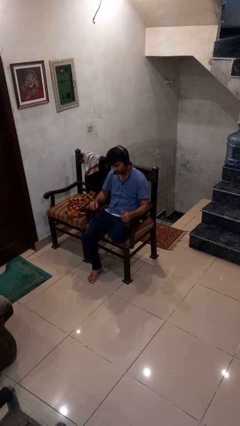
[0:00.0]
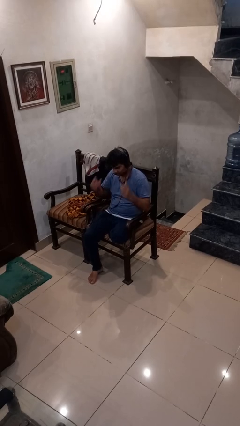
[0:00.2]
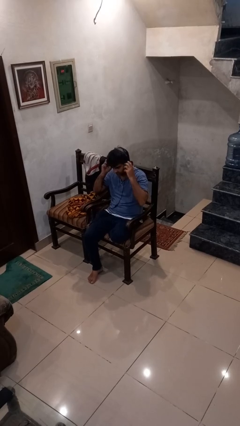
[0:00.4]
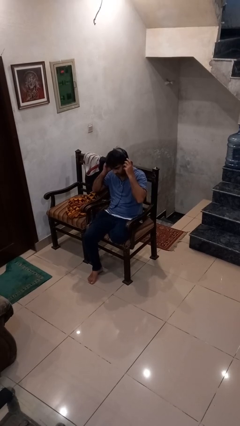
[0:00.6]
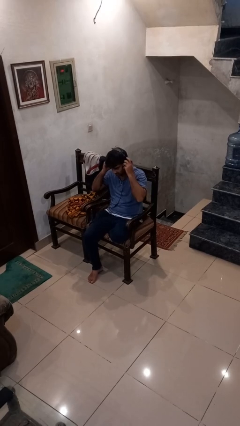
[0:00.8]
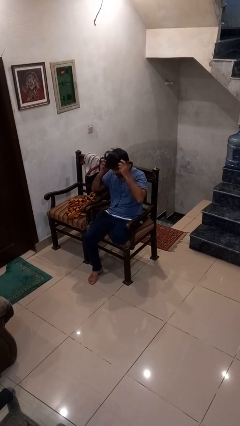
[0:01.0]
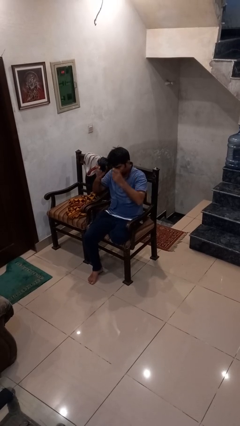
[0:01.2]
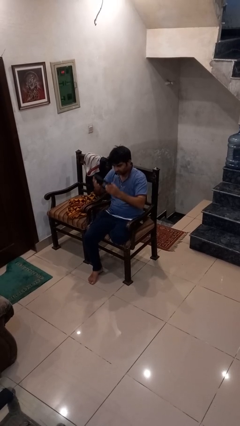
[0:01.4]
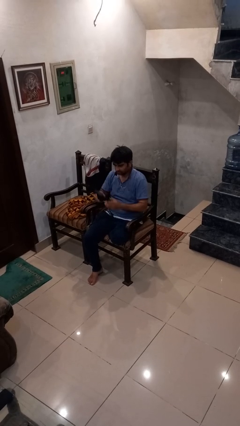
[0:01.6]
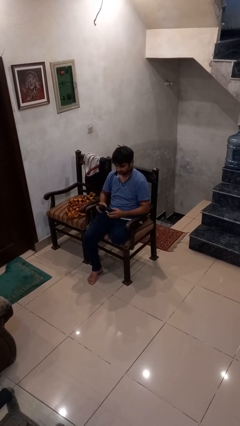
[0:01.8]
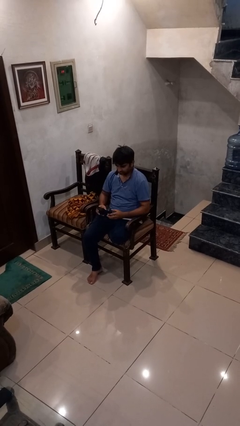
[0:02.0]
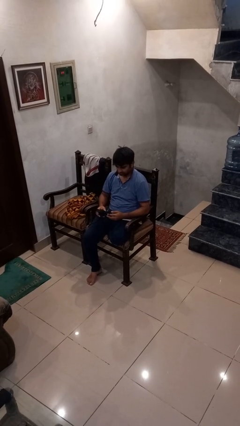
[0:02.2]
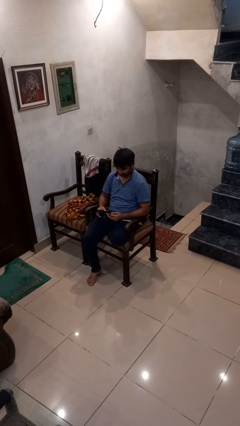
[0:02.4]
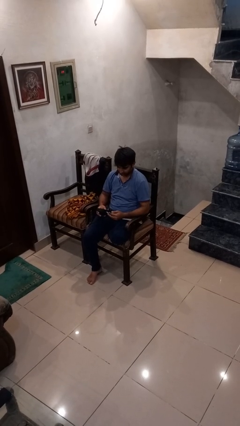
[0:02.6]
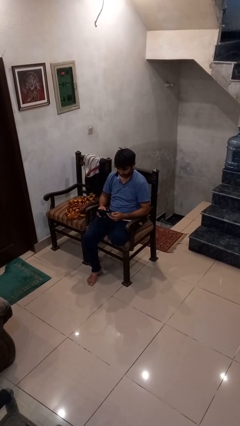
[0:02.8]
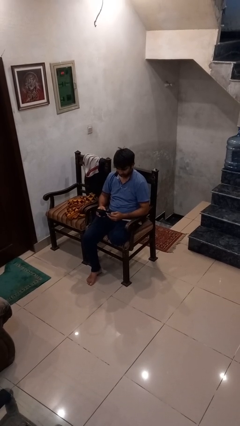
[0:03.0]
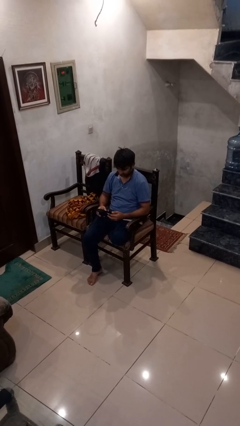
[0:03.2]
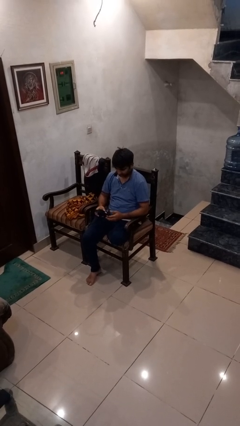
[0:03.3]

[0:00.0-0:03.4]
person takes off headphones

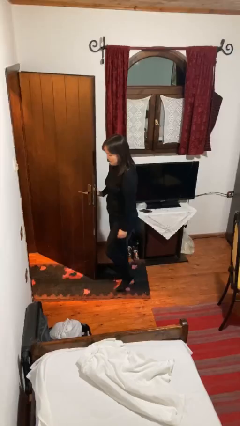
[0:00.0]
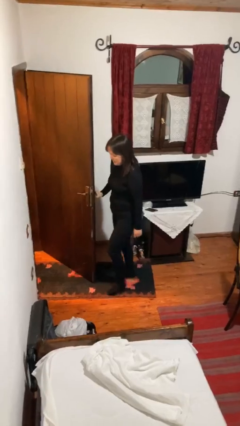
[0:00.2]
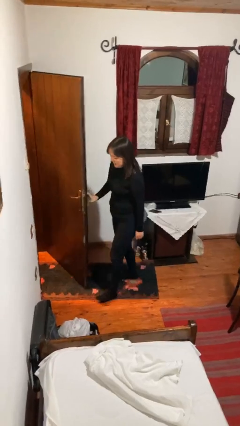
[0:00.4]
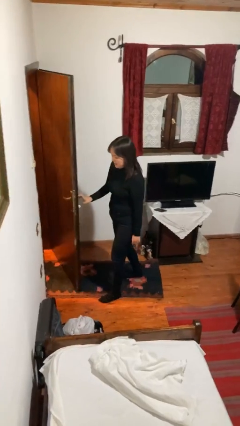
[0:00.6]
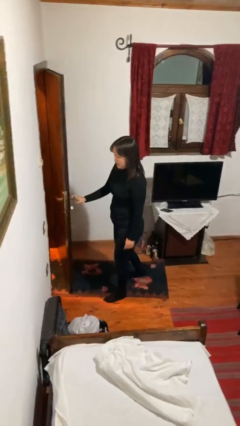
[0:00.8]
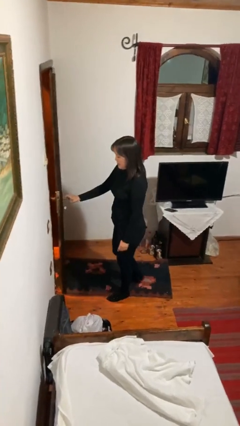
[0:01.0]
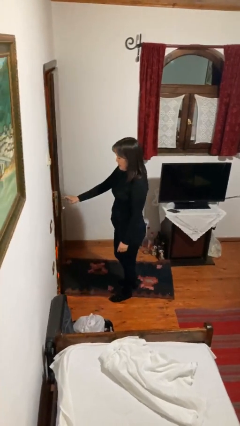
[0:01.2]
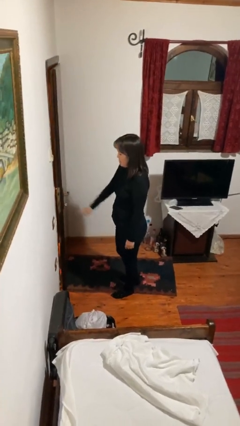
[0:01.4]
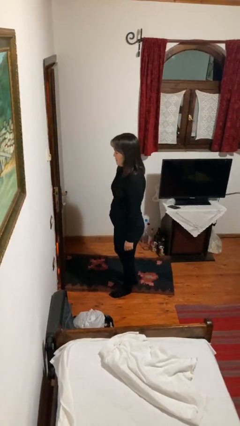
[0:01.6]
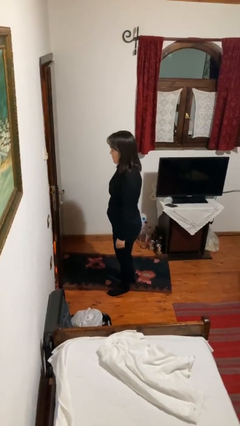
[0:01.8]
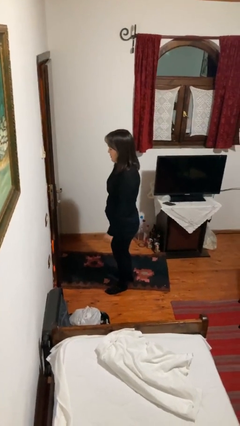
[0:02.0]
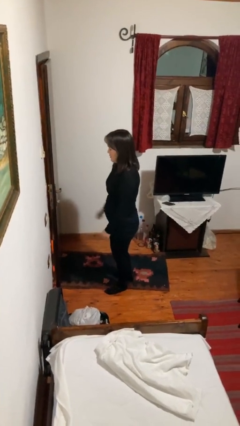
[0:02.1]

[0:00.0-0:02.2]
person closes facility door

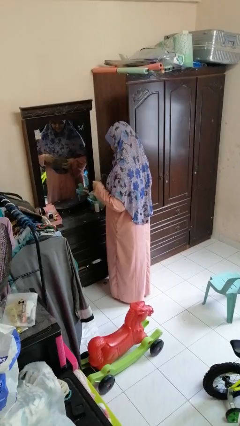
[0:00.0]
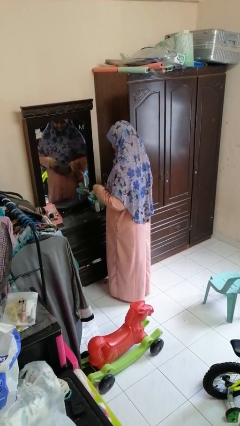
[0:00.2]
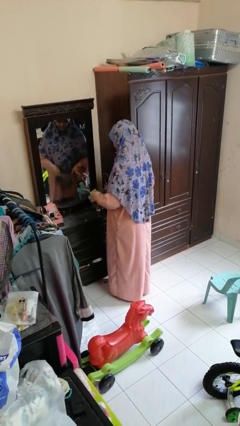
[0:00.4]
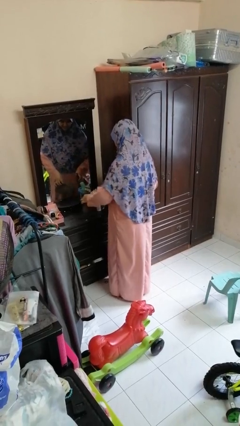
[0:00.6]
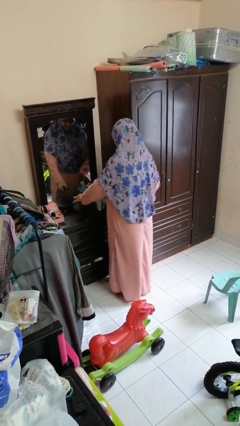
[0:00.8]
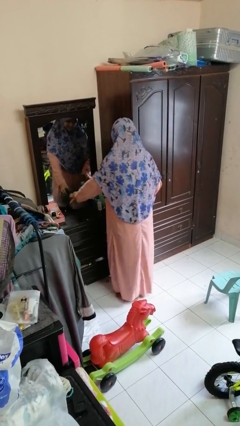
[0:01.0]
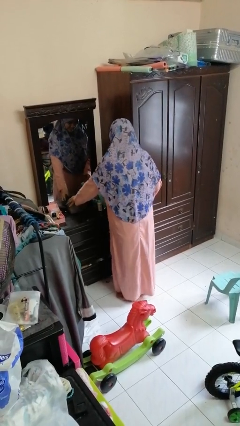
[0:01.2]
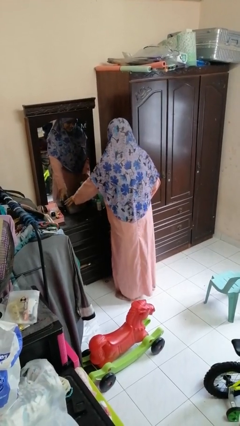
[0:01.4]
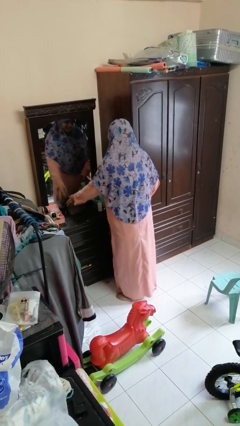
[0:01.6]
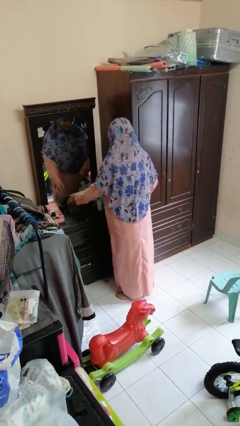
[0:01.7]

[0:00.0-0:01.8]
person puts down object on countertop

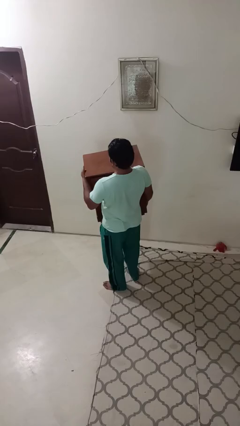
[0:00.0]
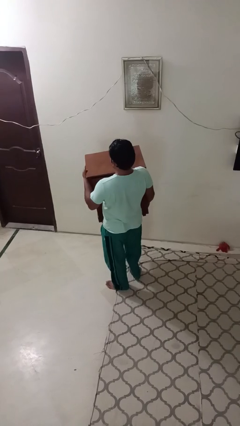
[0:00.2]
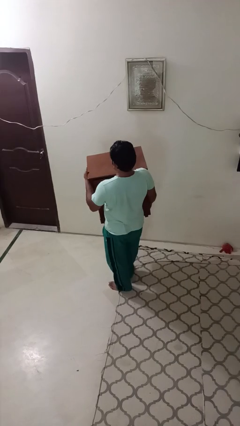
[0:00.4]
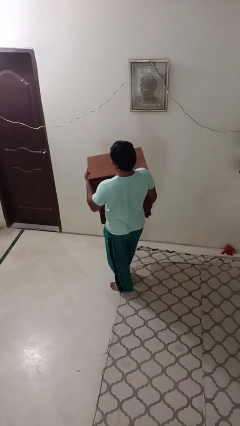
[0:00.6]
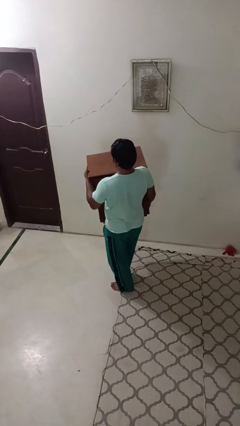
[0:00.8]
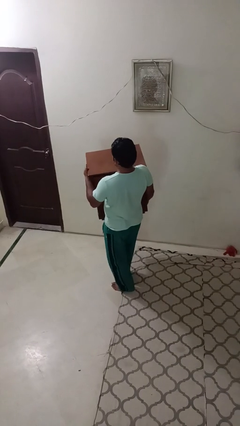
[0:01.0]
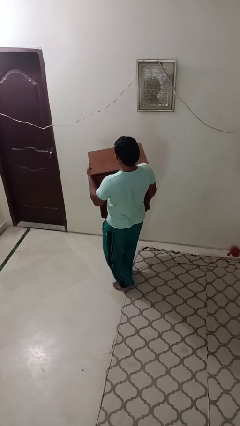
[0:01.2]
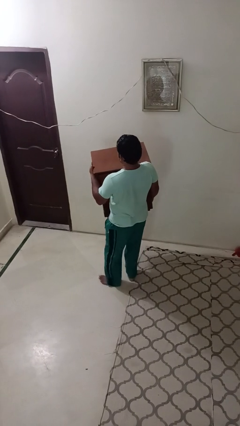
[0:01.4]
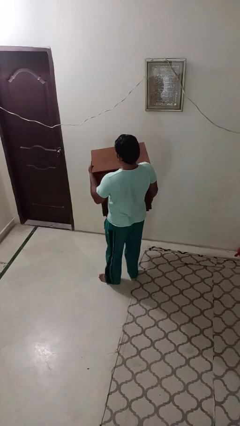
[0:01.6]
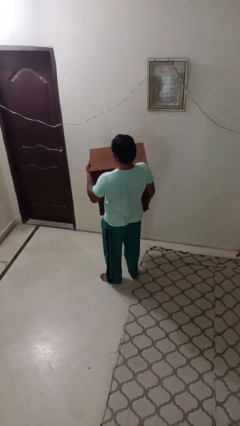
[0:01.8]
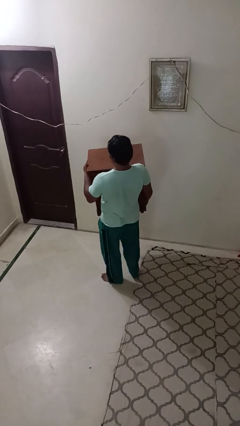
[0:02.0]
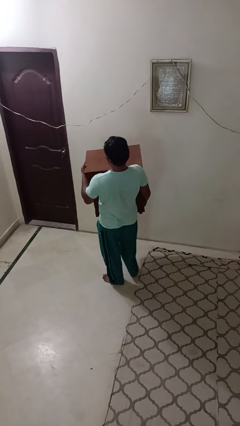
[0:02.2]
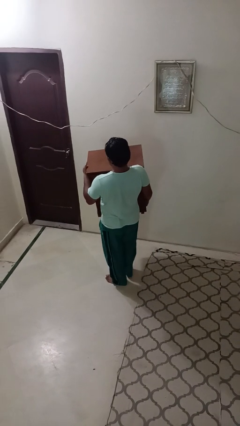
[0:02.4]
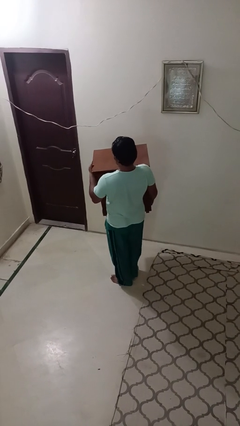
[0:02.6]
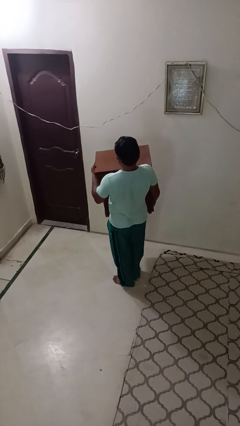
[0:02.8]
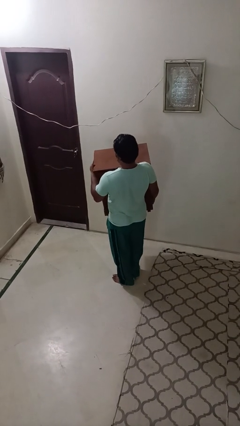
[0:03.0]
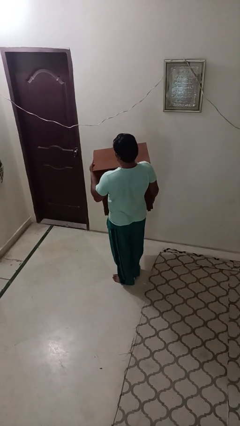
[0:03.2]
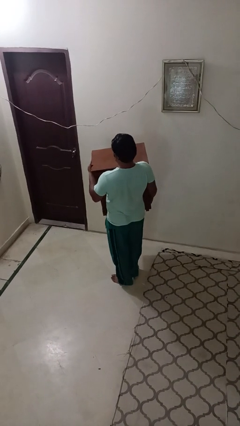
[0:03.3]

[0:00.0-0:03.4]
person carries furniture

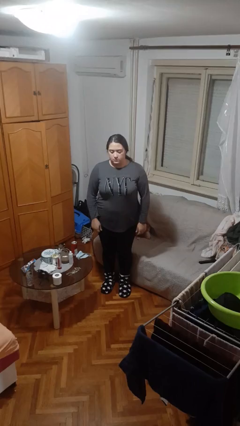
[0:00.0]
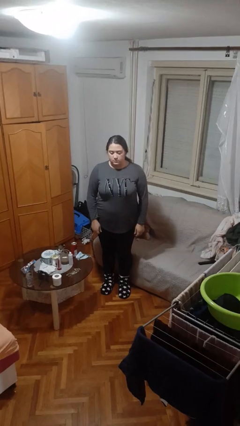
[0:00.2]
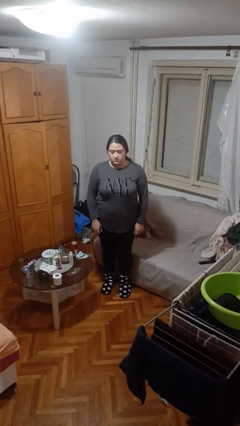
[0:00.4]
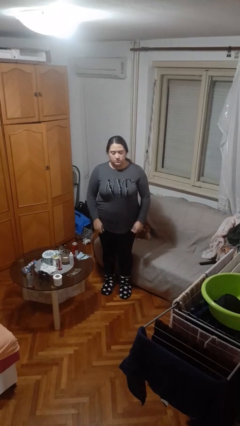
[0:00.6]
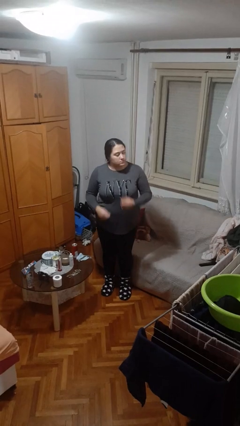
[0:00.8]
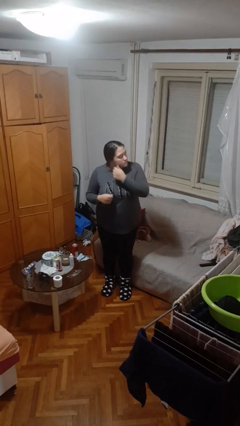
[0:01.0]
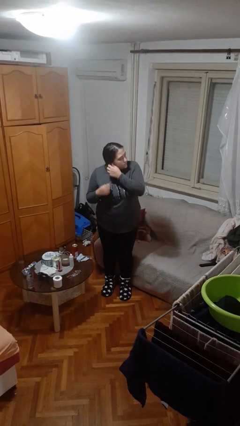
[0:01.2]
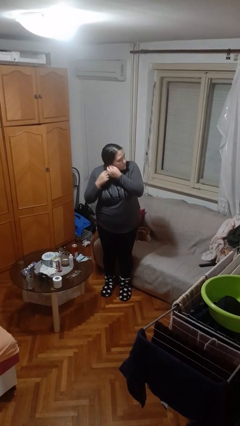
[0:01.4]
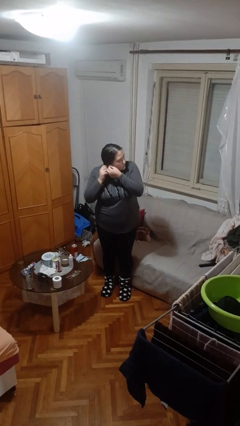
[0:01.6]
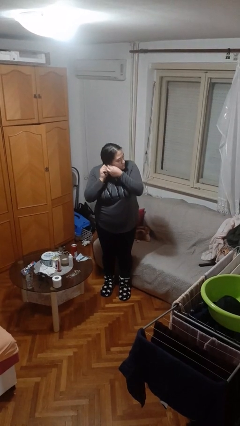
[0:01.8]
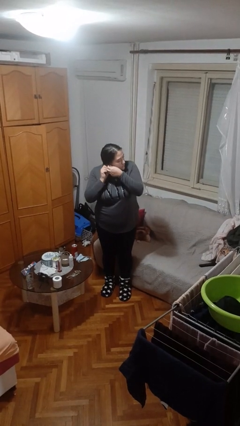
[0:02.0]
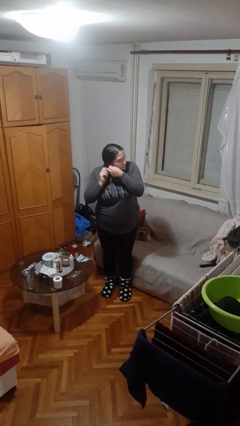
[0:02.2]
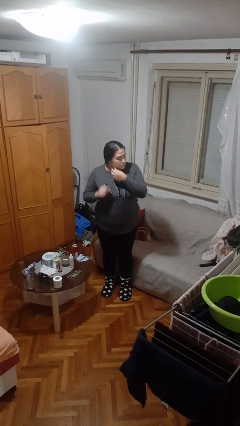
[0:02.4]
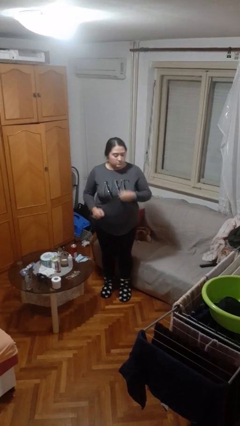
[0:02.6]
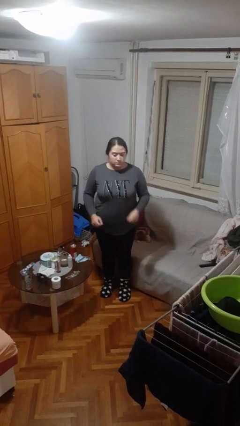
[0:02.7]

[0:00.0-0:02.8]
person puts on earrings

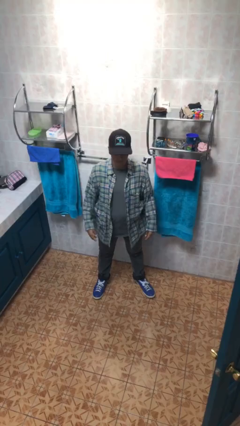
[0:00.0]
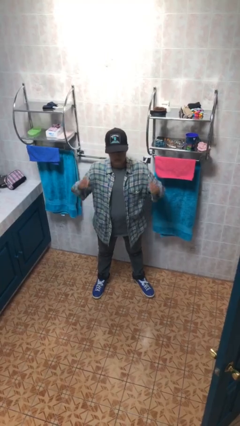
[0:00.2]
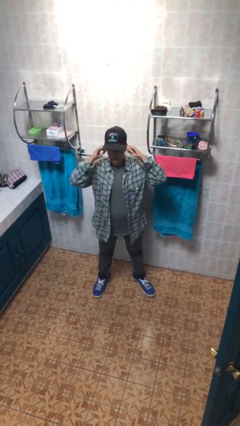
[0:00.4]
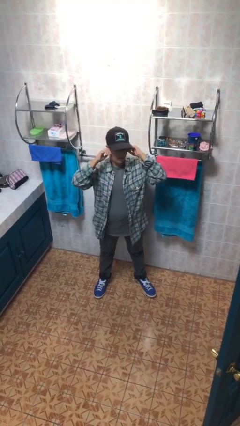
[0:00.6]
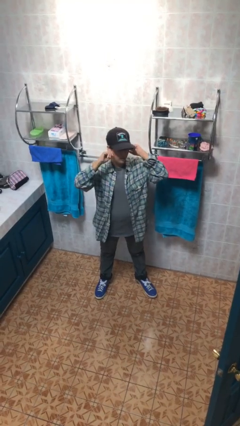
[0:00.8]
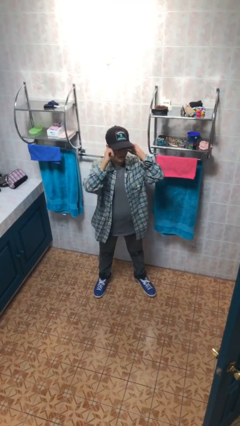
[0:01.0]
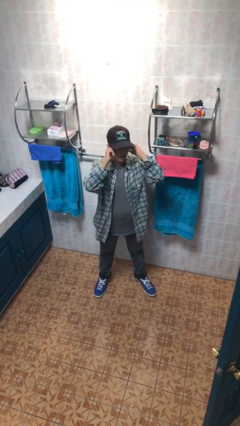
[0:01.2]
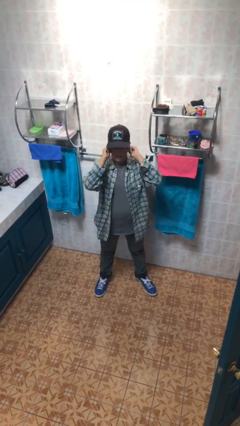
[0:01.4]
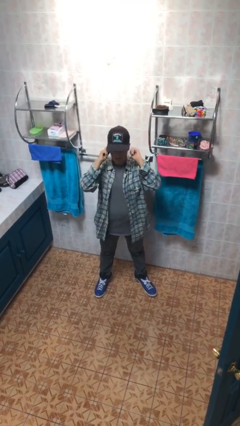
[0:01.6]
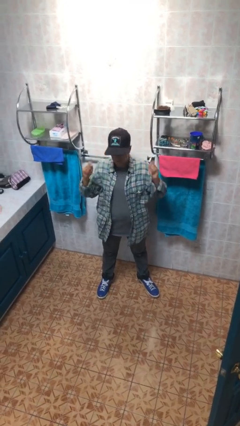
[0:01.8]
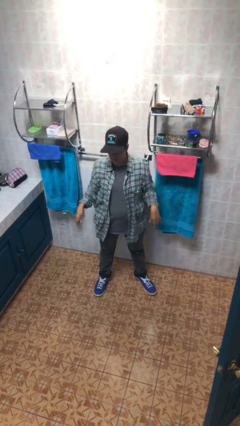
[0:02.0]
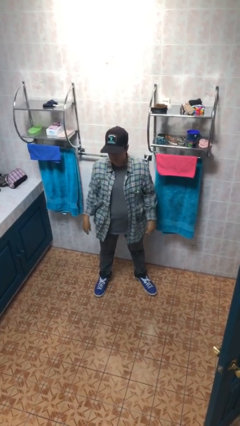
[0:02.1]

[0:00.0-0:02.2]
person puts fingers in ear

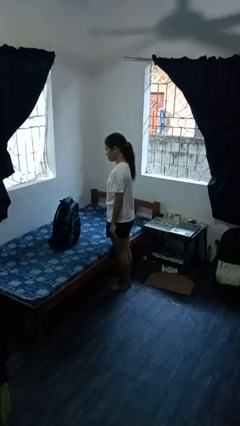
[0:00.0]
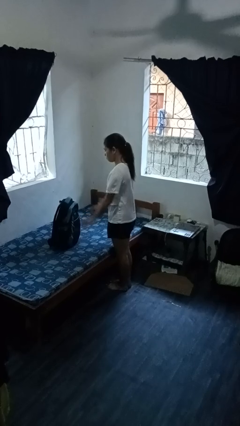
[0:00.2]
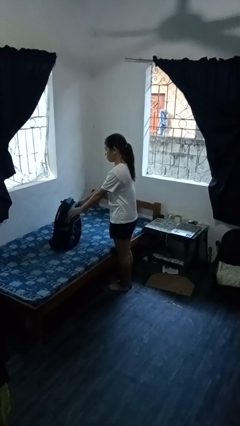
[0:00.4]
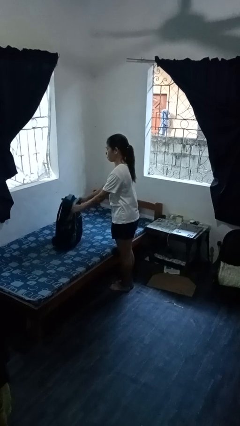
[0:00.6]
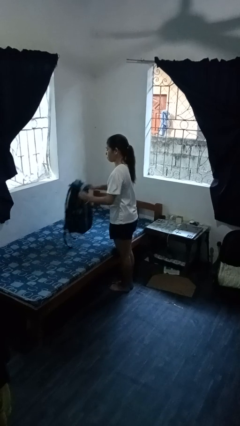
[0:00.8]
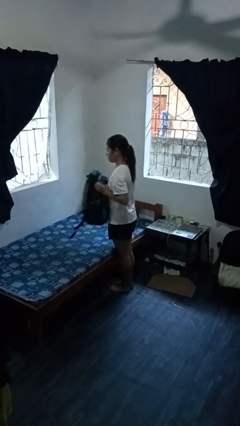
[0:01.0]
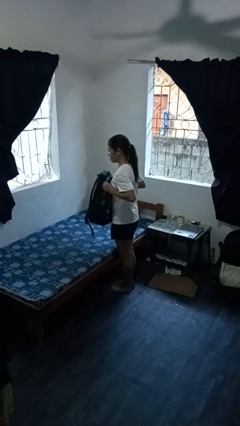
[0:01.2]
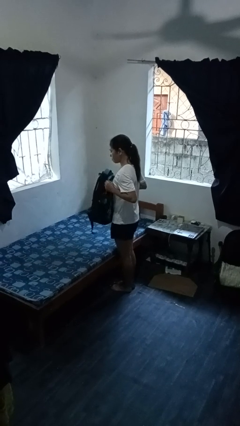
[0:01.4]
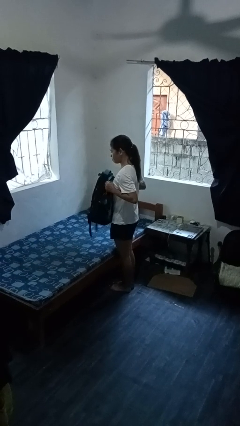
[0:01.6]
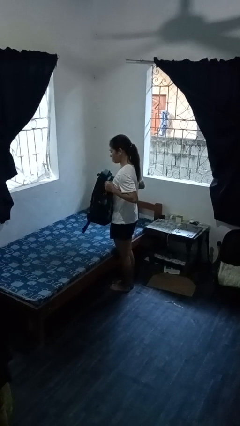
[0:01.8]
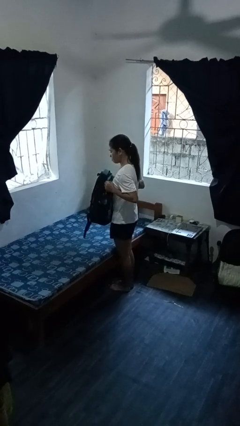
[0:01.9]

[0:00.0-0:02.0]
person picks up object from bed
